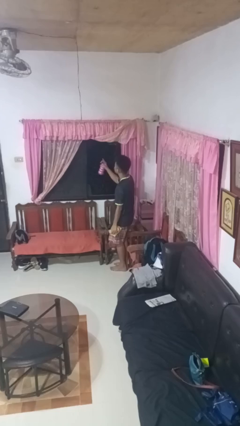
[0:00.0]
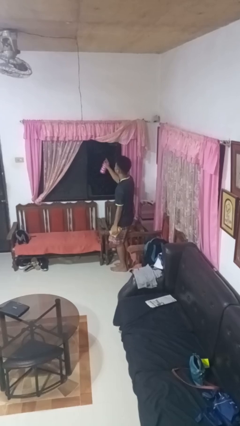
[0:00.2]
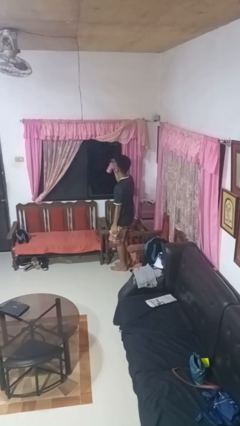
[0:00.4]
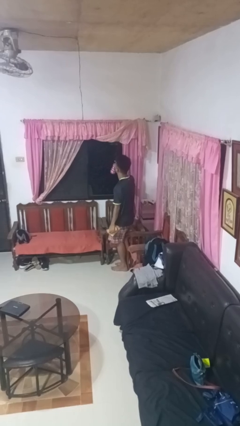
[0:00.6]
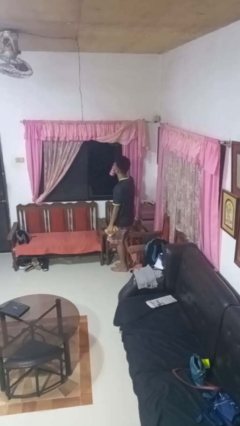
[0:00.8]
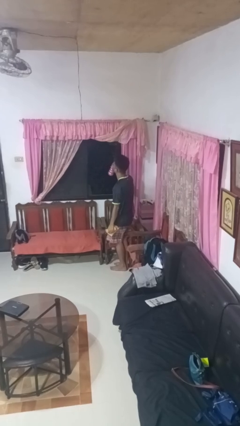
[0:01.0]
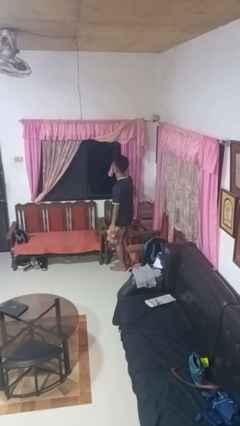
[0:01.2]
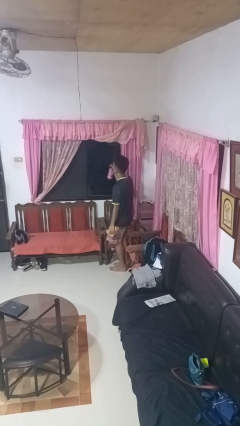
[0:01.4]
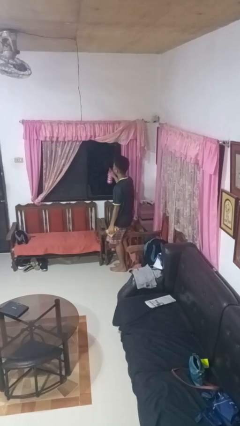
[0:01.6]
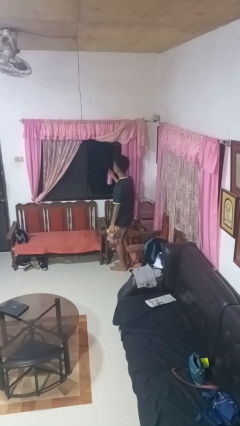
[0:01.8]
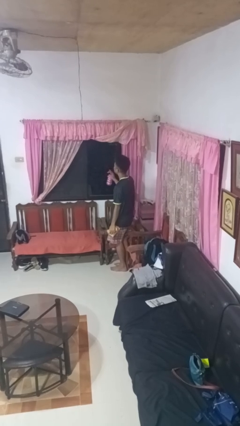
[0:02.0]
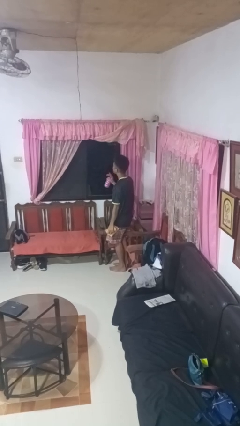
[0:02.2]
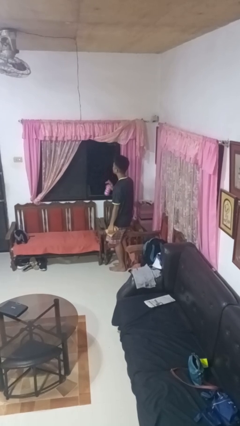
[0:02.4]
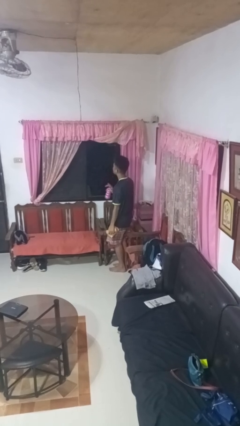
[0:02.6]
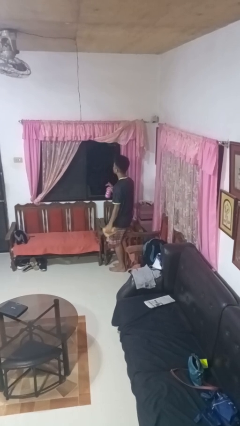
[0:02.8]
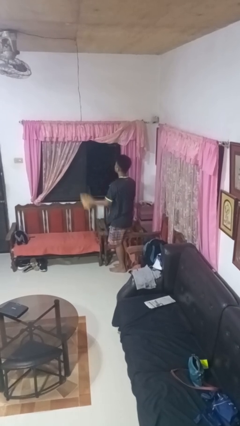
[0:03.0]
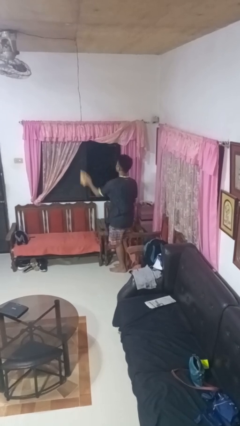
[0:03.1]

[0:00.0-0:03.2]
person sprays from bottle

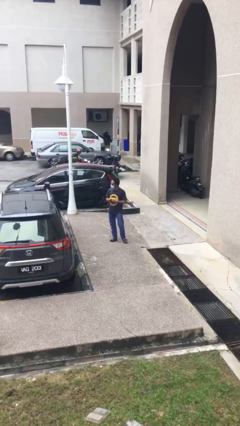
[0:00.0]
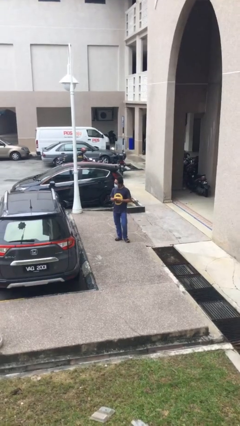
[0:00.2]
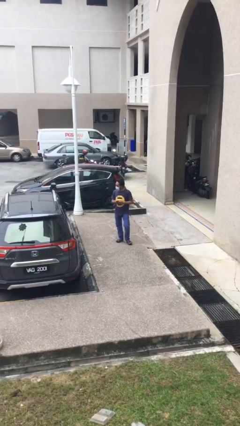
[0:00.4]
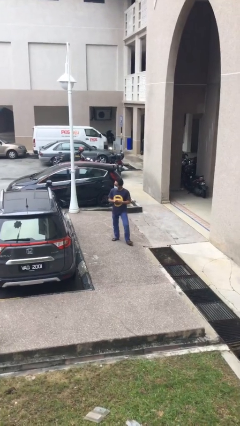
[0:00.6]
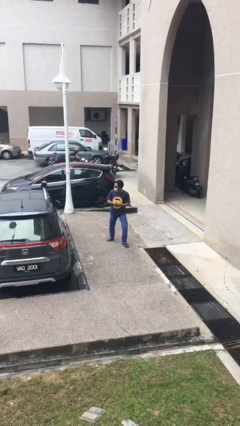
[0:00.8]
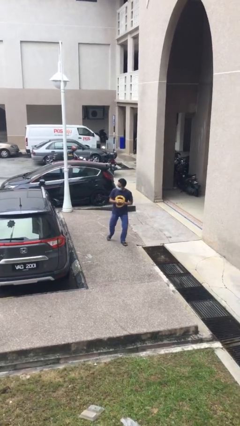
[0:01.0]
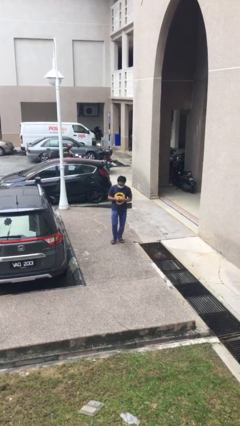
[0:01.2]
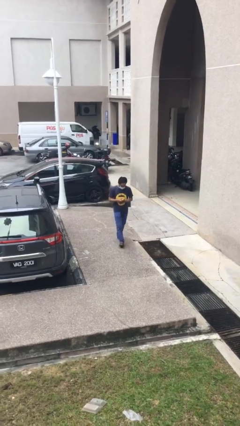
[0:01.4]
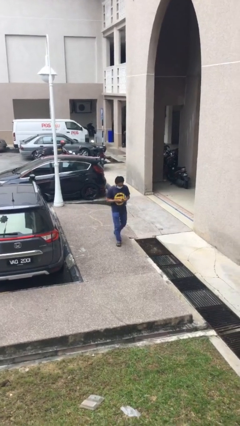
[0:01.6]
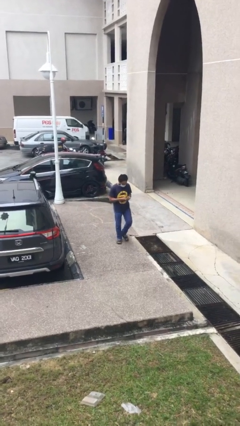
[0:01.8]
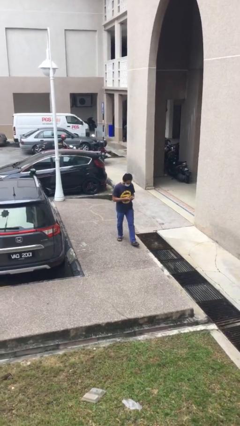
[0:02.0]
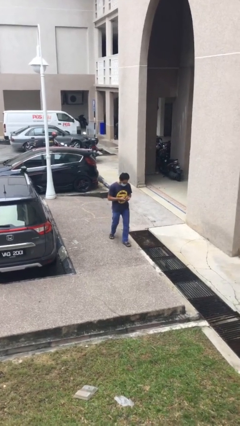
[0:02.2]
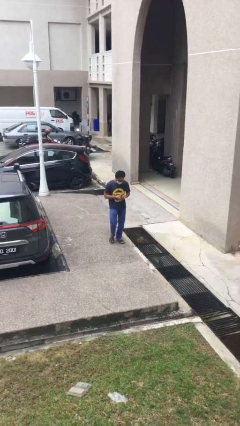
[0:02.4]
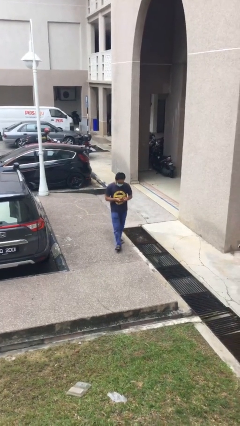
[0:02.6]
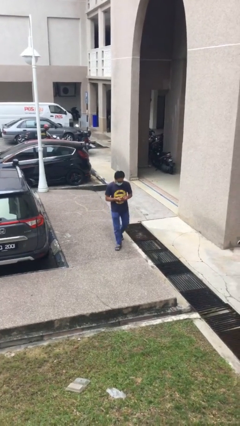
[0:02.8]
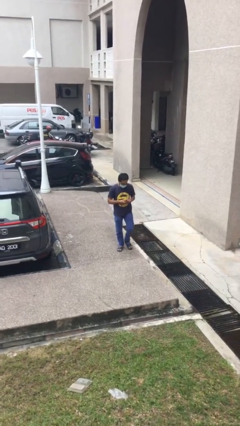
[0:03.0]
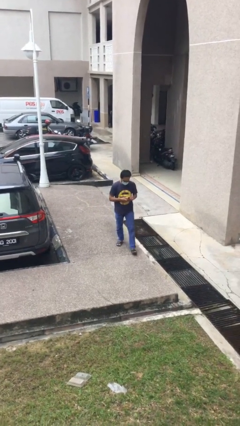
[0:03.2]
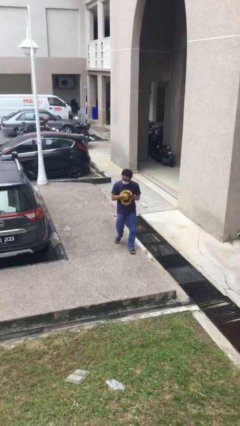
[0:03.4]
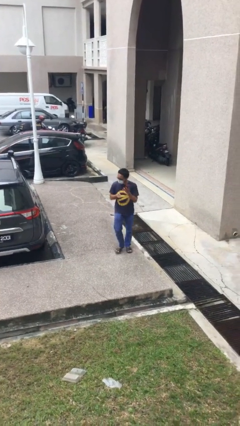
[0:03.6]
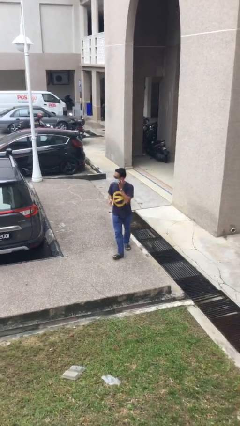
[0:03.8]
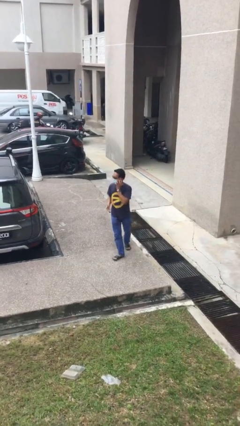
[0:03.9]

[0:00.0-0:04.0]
person texts on phone

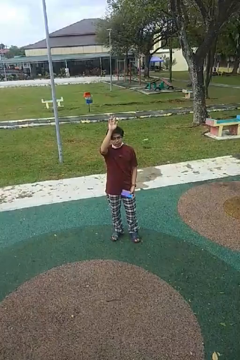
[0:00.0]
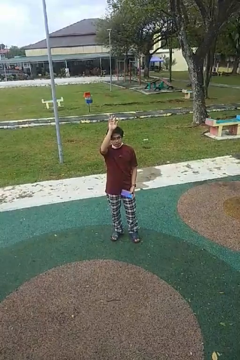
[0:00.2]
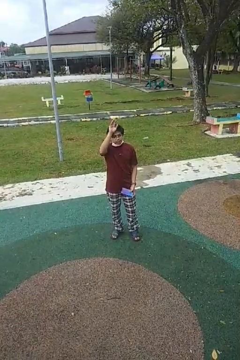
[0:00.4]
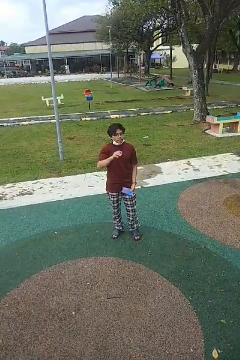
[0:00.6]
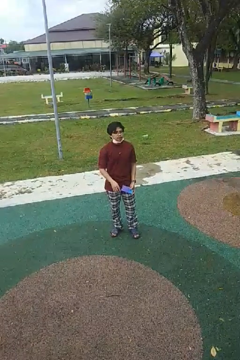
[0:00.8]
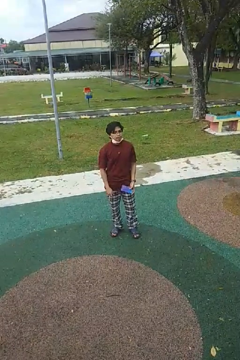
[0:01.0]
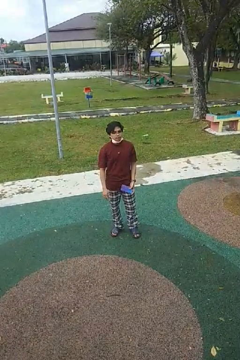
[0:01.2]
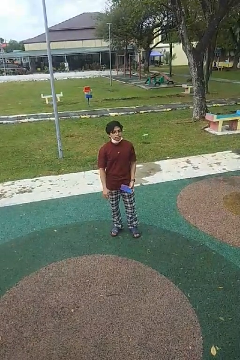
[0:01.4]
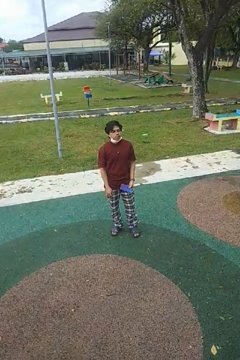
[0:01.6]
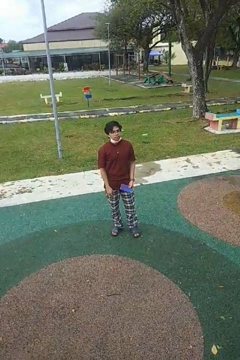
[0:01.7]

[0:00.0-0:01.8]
person gestures lower hand

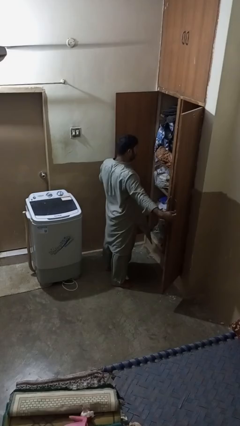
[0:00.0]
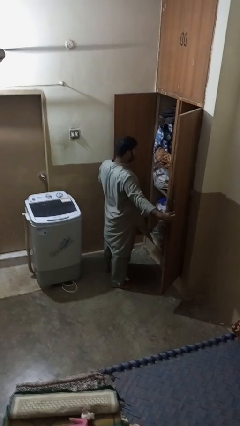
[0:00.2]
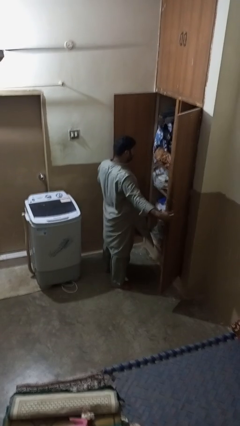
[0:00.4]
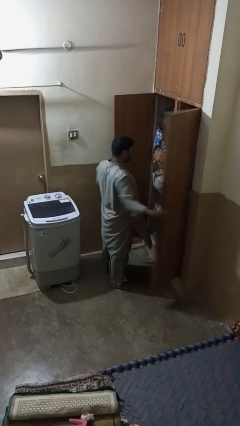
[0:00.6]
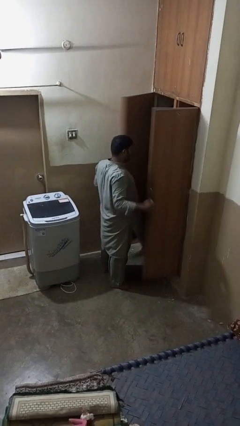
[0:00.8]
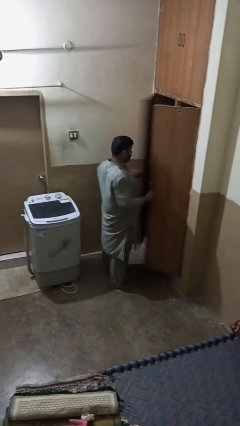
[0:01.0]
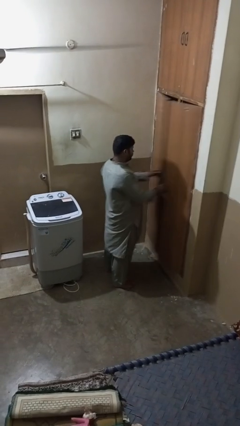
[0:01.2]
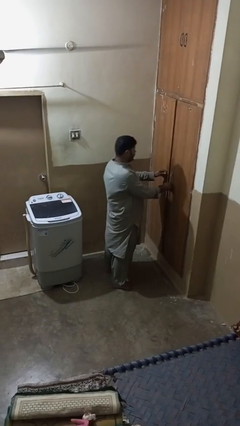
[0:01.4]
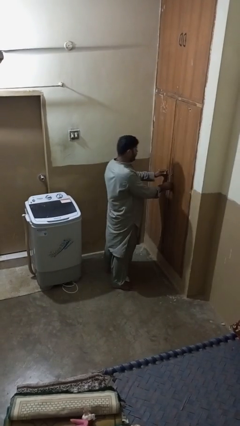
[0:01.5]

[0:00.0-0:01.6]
person closes closet door

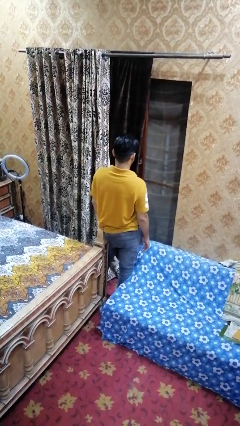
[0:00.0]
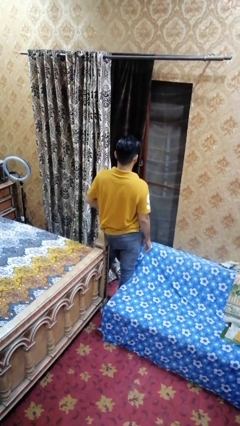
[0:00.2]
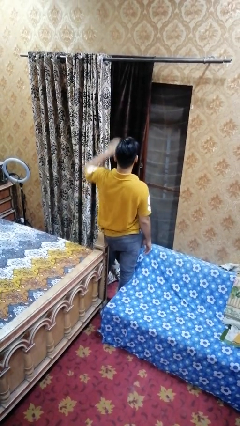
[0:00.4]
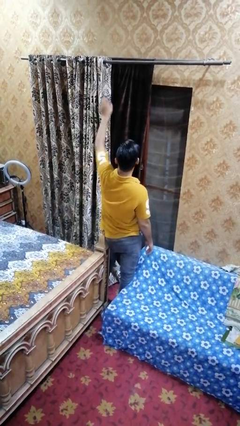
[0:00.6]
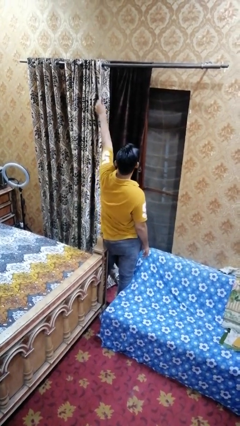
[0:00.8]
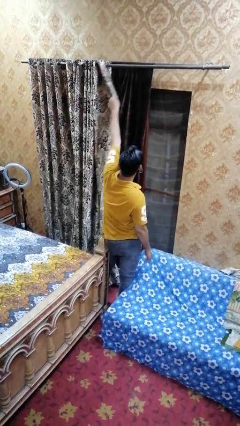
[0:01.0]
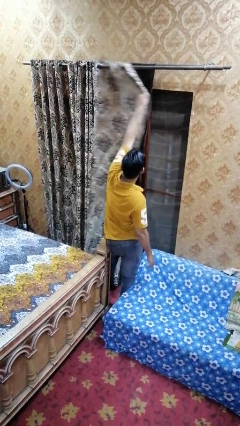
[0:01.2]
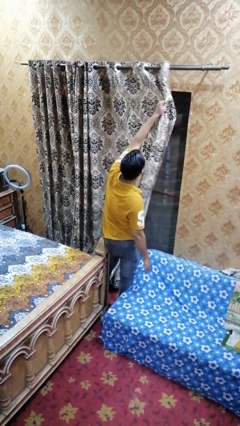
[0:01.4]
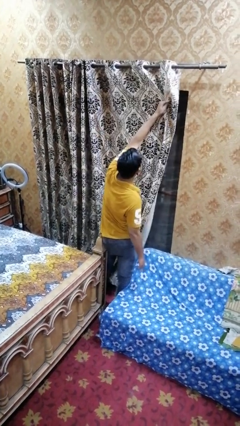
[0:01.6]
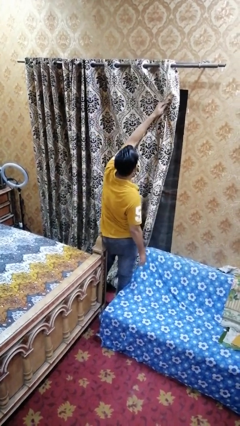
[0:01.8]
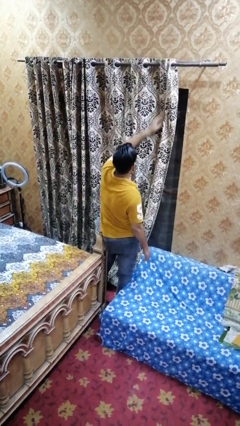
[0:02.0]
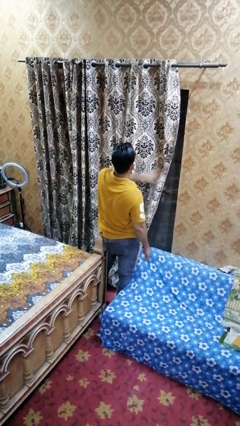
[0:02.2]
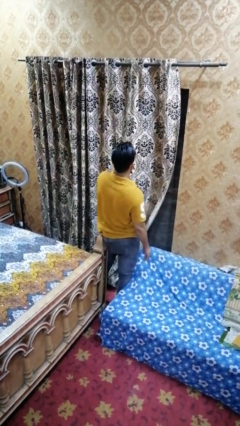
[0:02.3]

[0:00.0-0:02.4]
person closes curtains

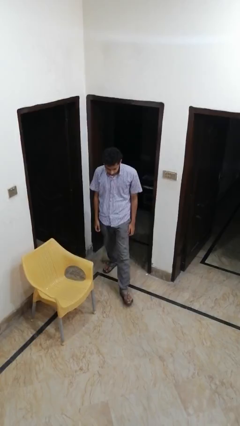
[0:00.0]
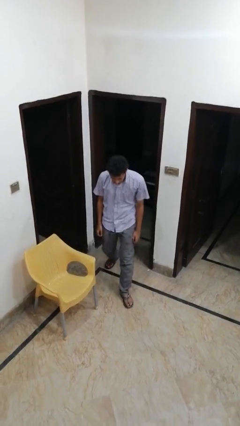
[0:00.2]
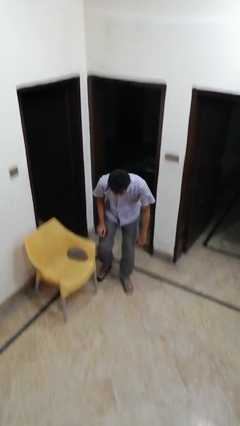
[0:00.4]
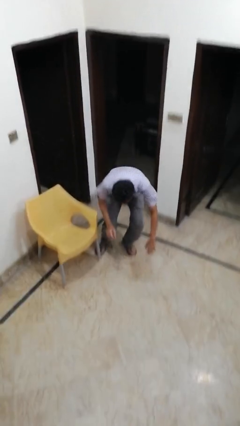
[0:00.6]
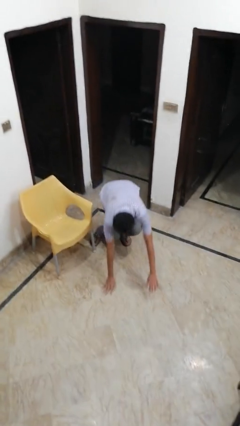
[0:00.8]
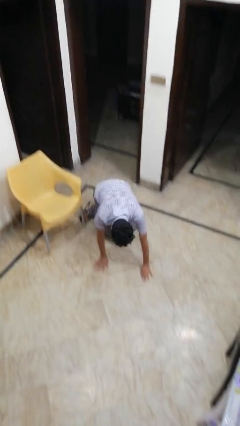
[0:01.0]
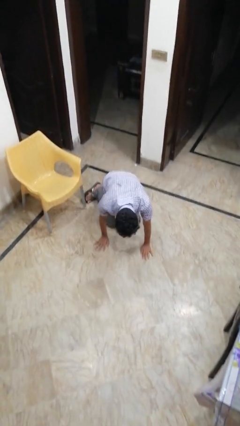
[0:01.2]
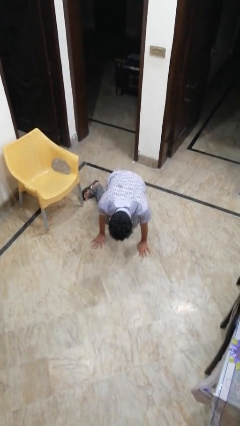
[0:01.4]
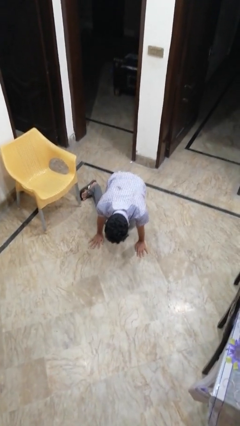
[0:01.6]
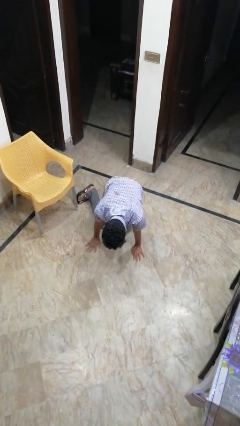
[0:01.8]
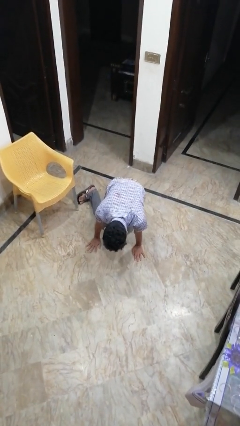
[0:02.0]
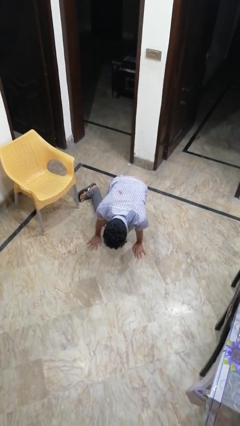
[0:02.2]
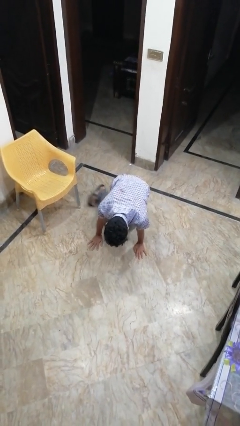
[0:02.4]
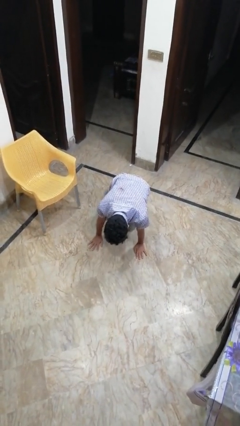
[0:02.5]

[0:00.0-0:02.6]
person trips on object on floor

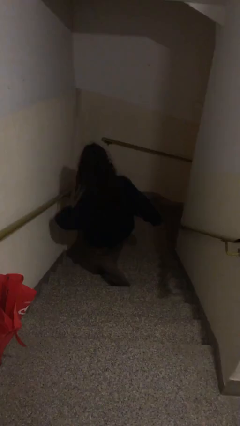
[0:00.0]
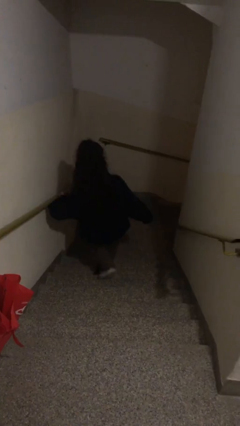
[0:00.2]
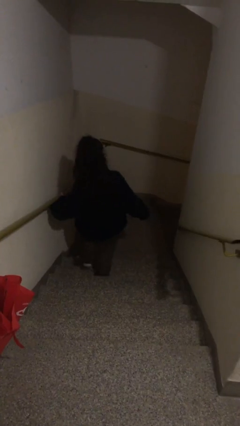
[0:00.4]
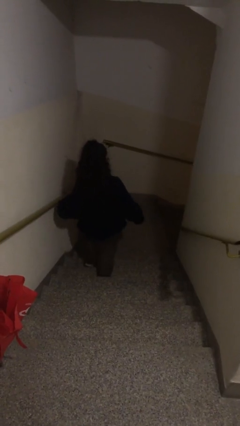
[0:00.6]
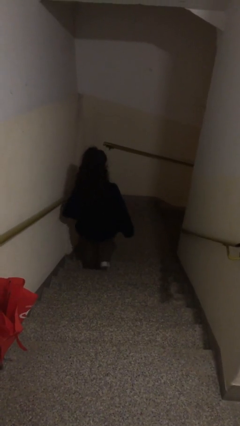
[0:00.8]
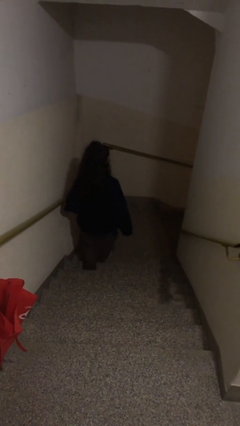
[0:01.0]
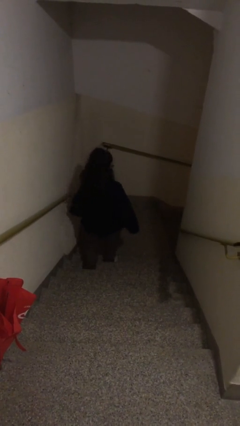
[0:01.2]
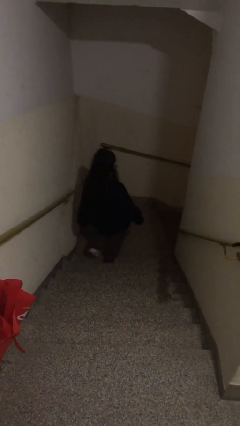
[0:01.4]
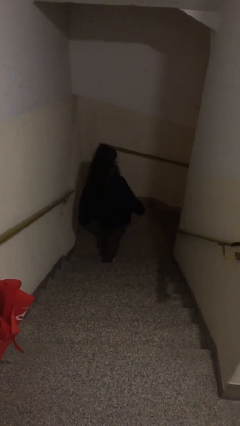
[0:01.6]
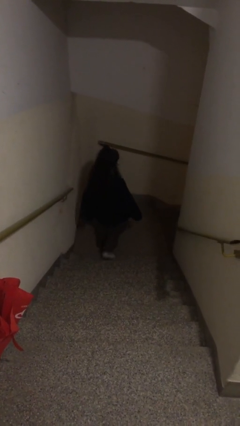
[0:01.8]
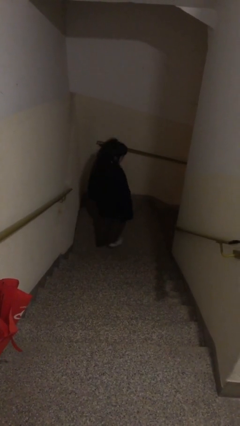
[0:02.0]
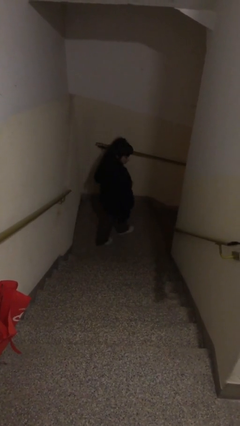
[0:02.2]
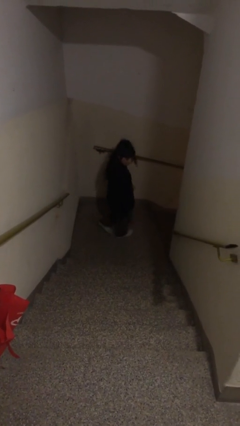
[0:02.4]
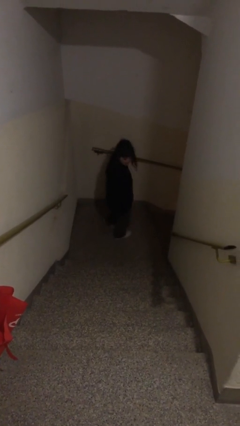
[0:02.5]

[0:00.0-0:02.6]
person climbs down stairs
